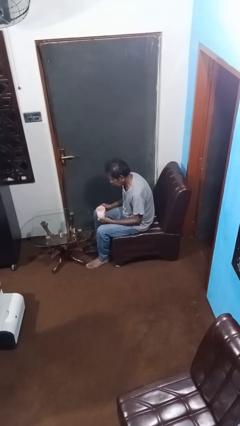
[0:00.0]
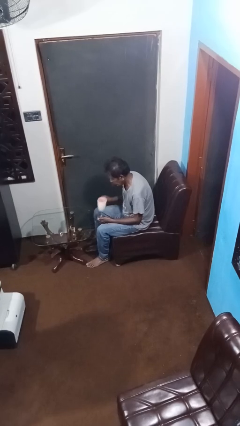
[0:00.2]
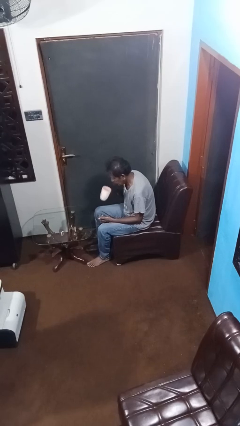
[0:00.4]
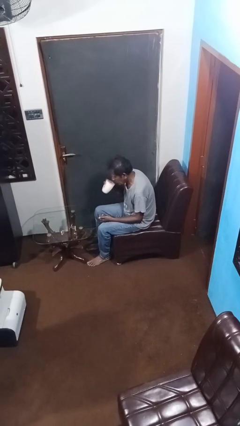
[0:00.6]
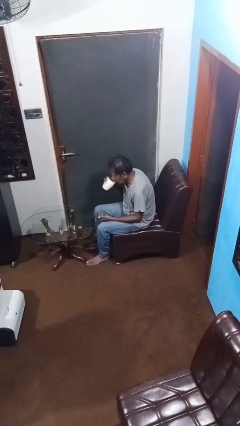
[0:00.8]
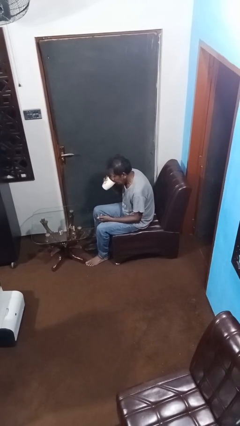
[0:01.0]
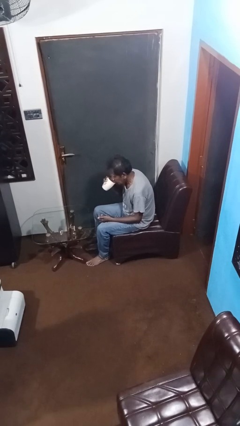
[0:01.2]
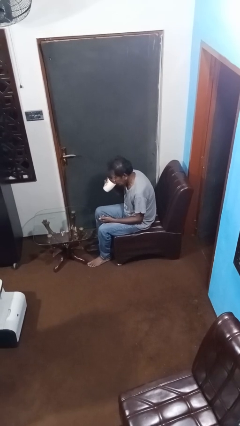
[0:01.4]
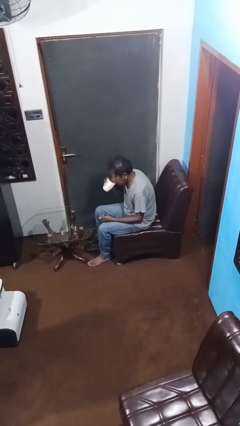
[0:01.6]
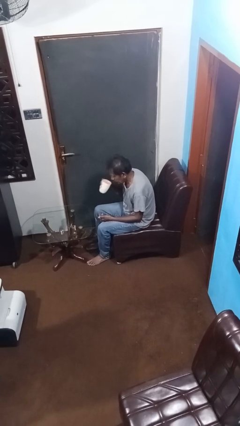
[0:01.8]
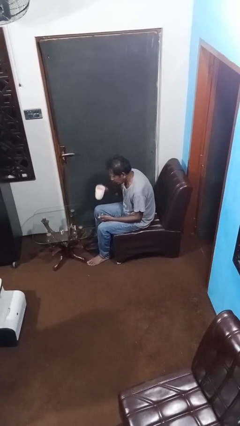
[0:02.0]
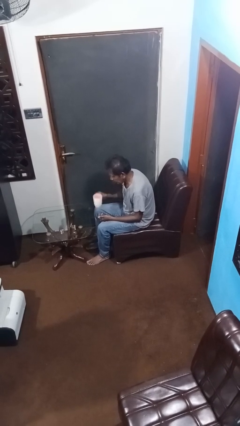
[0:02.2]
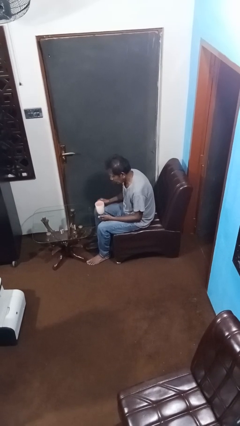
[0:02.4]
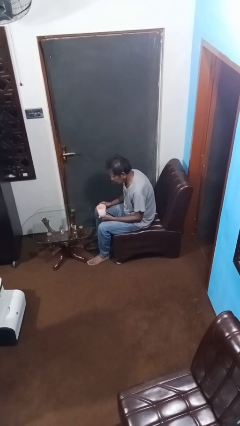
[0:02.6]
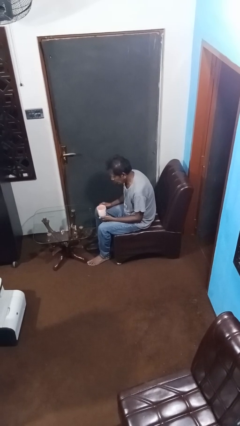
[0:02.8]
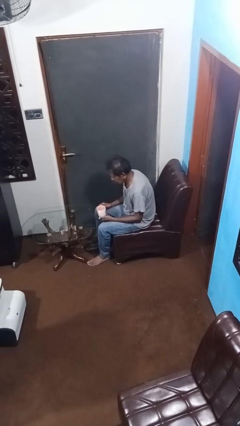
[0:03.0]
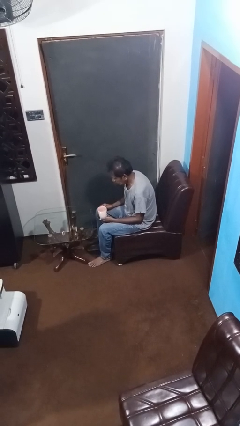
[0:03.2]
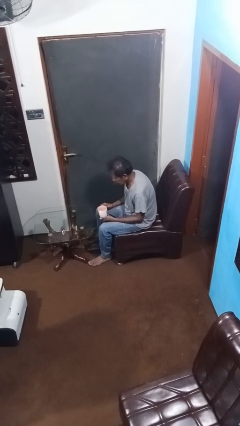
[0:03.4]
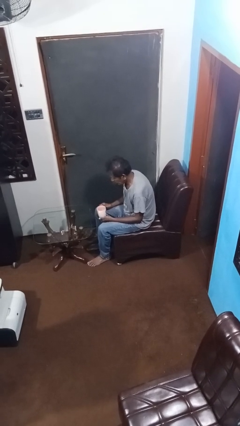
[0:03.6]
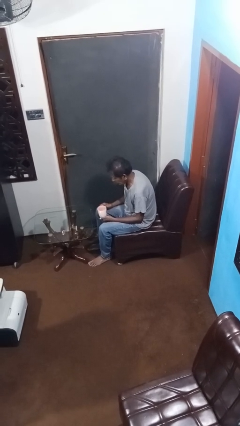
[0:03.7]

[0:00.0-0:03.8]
person drinks from mug

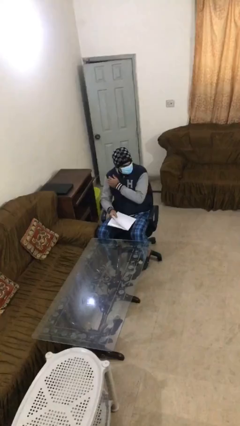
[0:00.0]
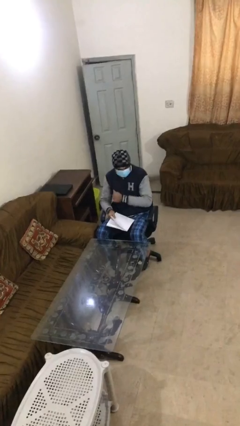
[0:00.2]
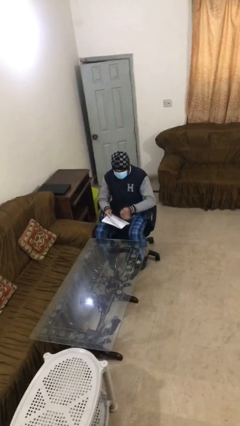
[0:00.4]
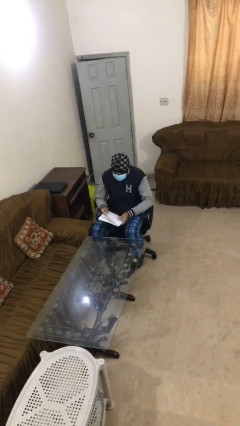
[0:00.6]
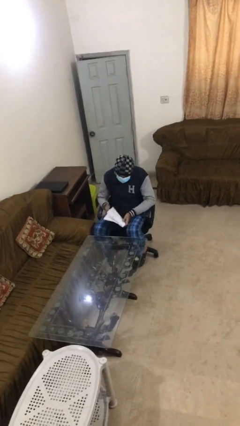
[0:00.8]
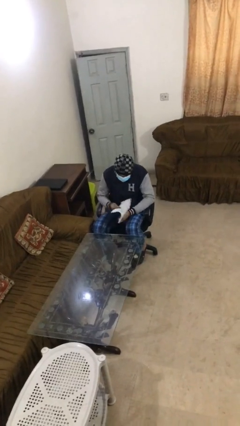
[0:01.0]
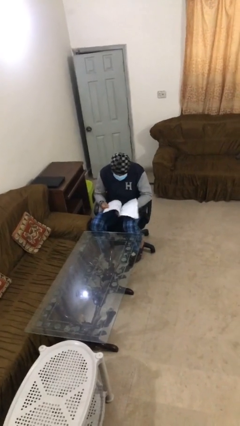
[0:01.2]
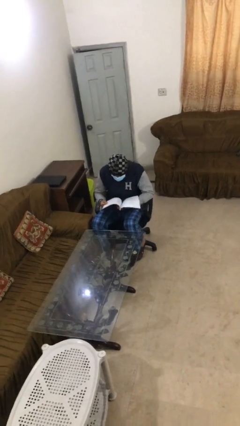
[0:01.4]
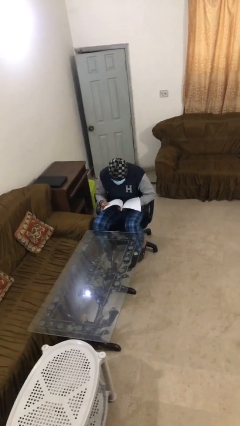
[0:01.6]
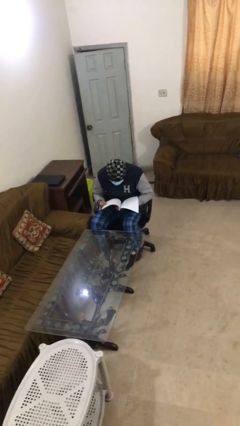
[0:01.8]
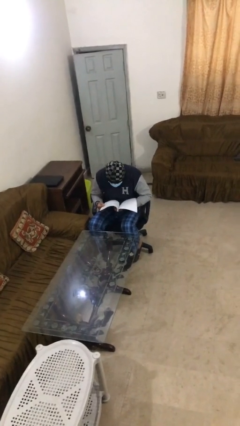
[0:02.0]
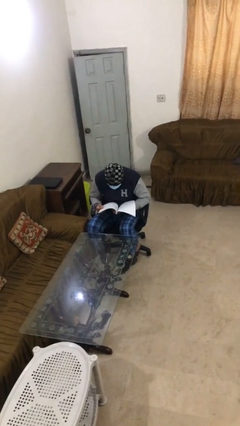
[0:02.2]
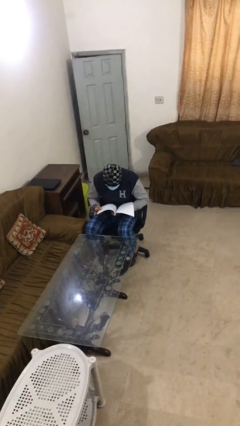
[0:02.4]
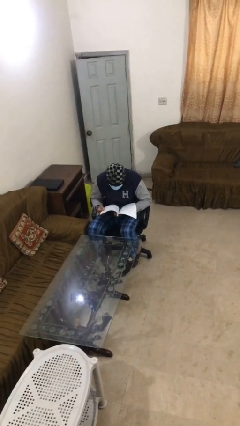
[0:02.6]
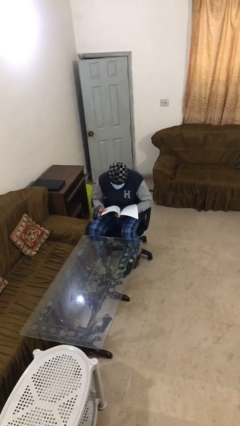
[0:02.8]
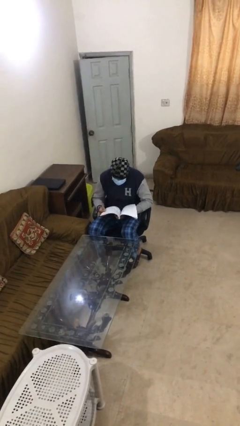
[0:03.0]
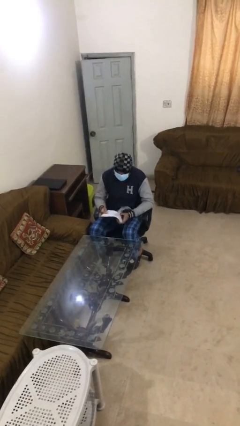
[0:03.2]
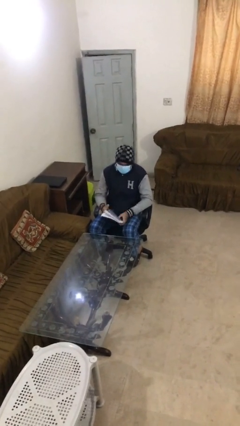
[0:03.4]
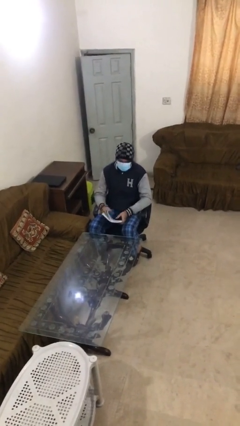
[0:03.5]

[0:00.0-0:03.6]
person reads document

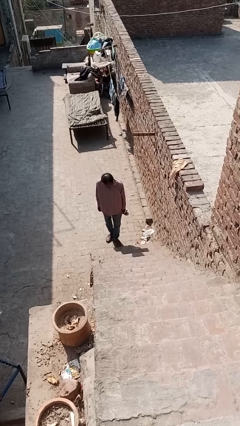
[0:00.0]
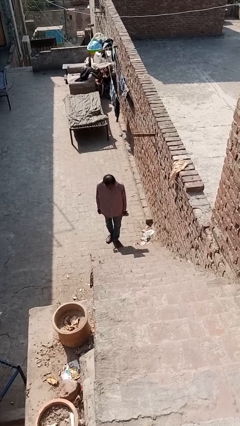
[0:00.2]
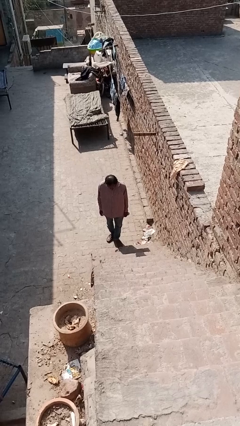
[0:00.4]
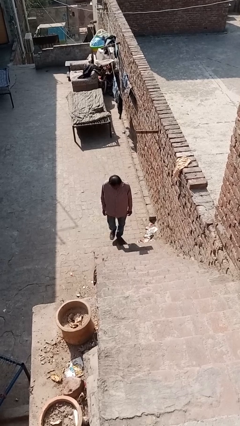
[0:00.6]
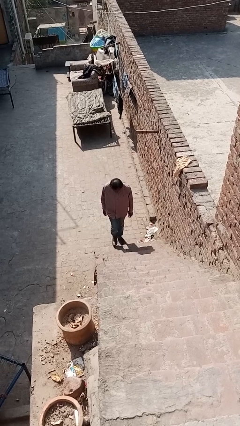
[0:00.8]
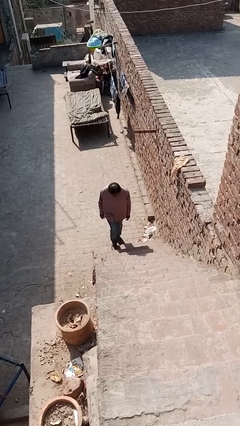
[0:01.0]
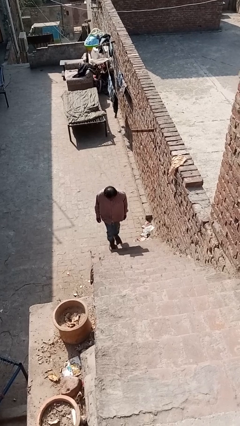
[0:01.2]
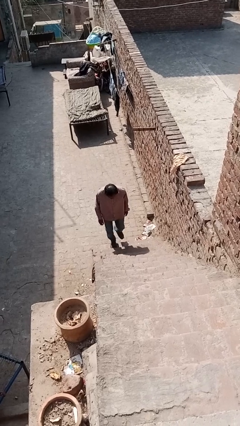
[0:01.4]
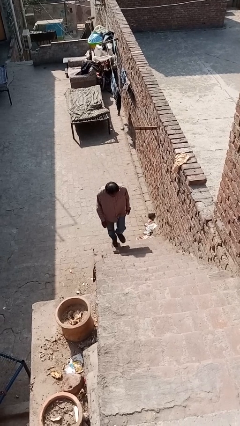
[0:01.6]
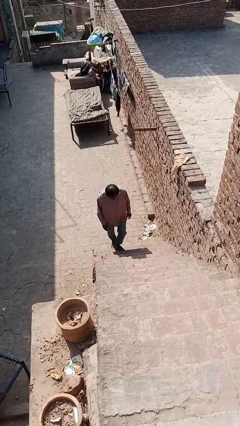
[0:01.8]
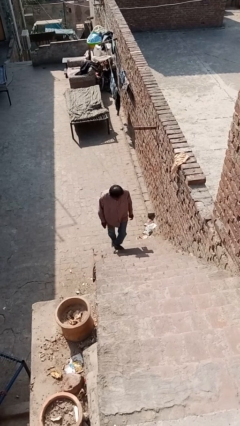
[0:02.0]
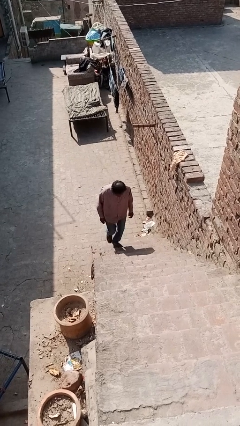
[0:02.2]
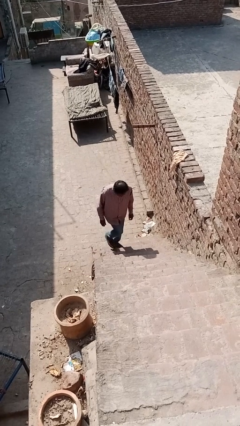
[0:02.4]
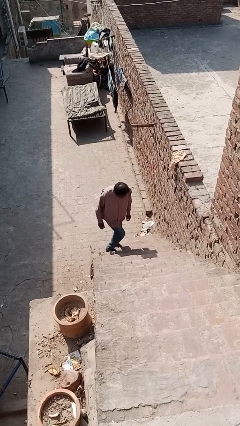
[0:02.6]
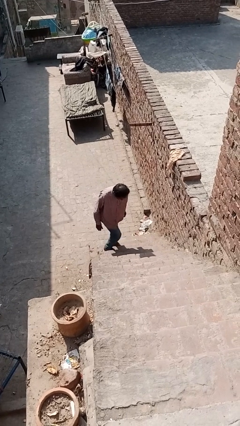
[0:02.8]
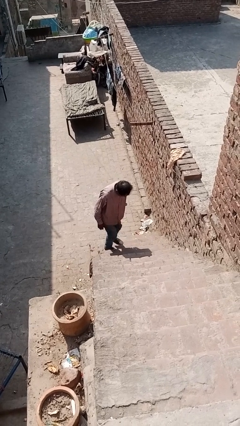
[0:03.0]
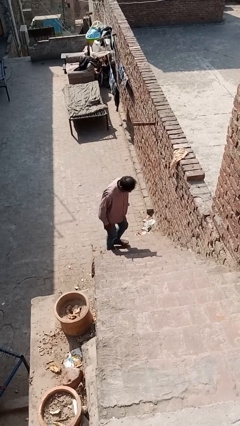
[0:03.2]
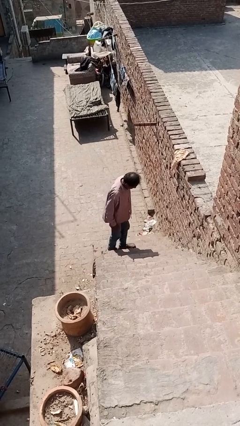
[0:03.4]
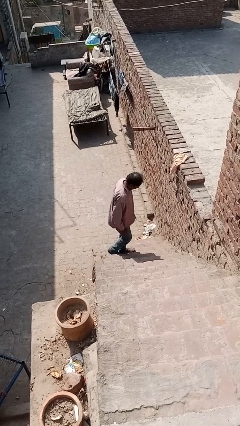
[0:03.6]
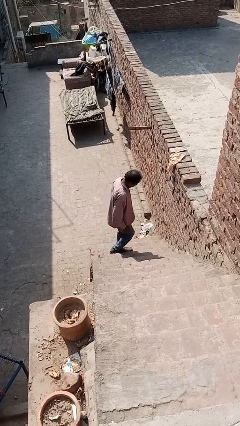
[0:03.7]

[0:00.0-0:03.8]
person climbs up stairs

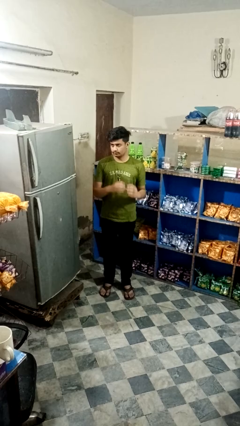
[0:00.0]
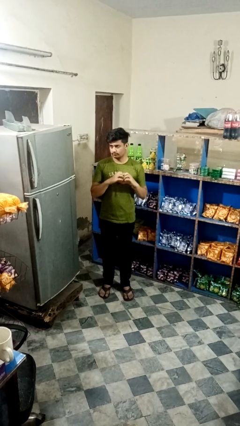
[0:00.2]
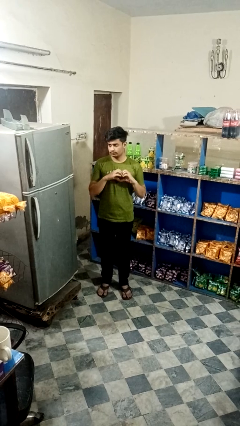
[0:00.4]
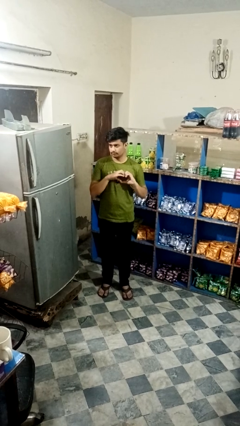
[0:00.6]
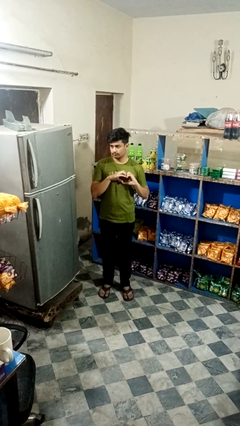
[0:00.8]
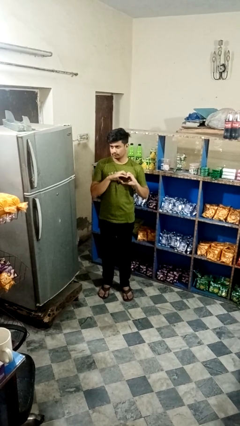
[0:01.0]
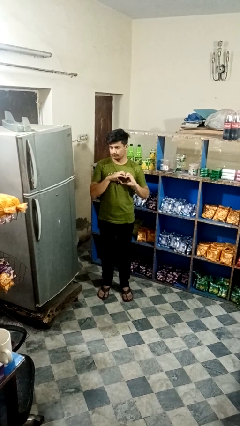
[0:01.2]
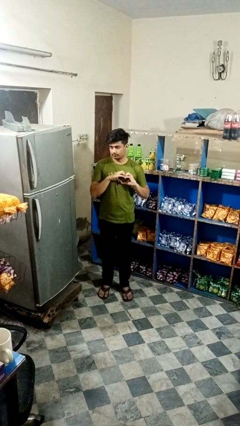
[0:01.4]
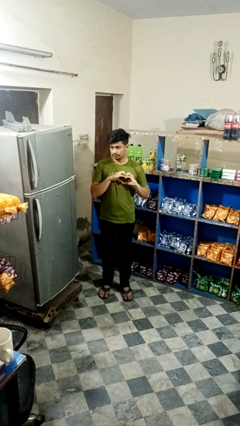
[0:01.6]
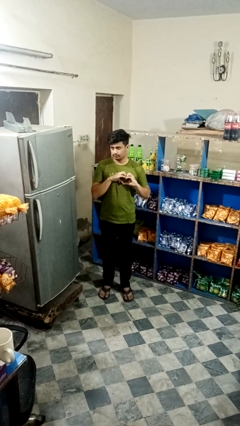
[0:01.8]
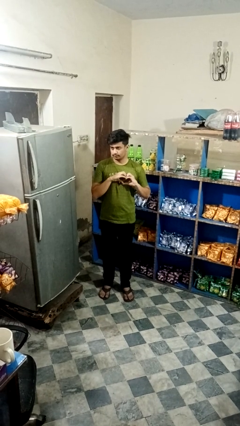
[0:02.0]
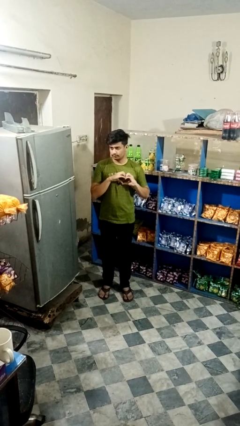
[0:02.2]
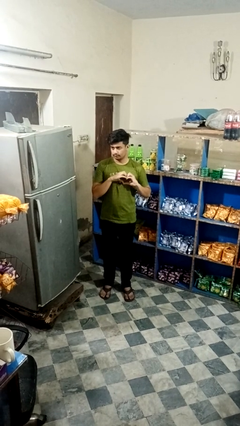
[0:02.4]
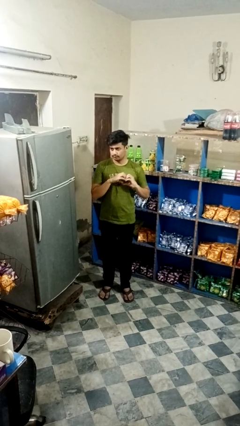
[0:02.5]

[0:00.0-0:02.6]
person gestures heart

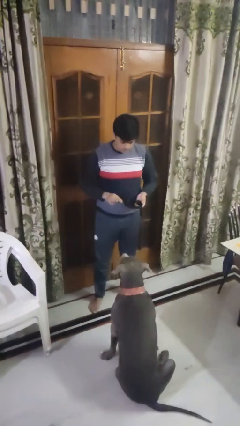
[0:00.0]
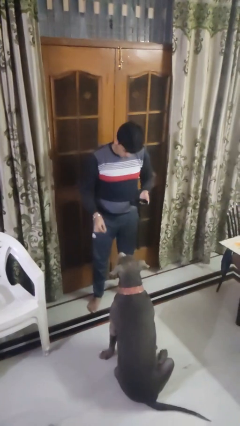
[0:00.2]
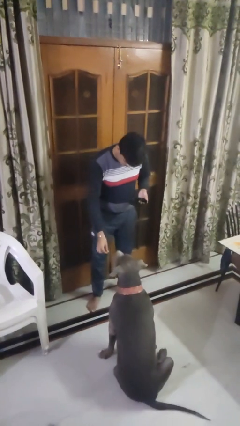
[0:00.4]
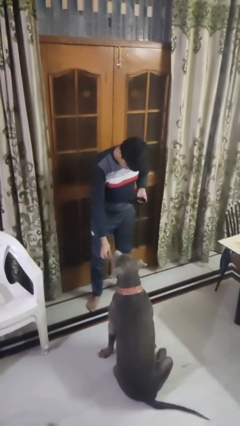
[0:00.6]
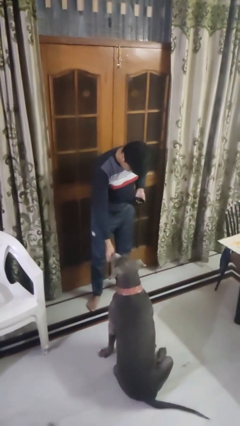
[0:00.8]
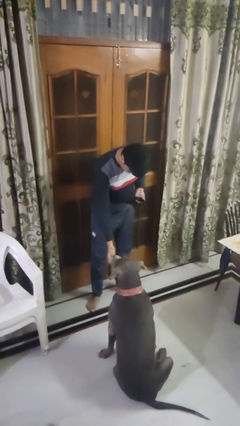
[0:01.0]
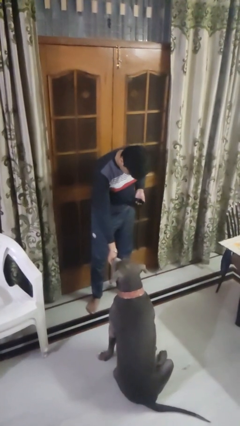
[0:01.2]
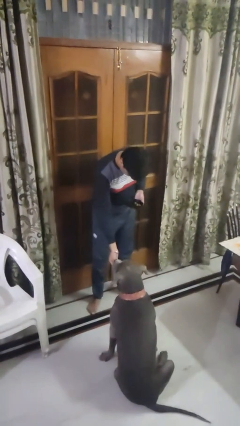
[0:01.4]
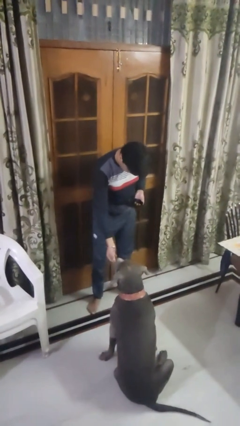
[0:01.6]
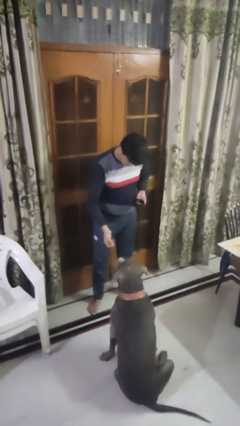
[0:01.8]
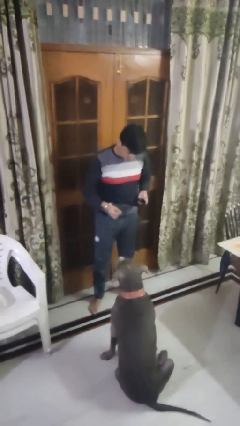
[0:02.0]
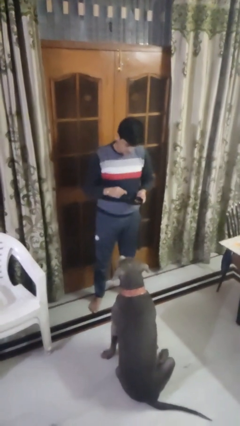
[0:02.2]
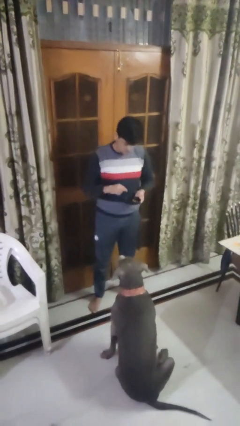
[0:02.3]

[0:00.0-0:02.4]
person feeds dog

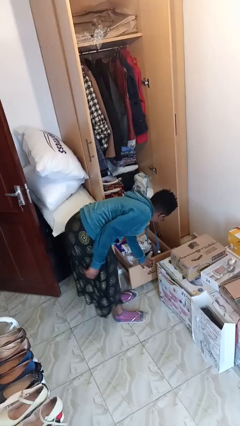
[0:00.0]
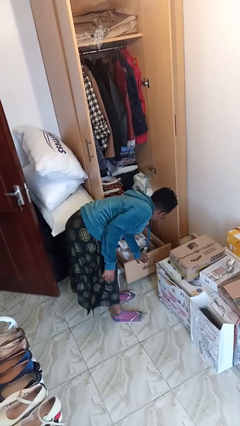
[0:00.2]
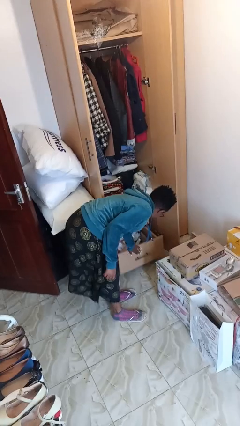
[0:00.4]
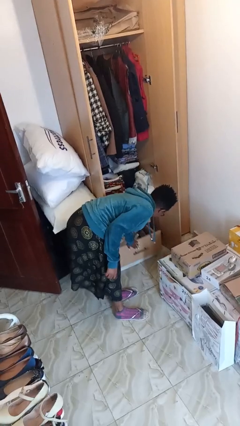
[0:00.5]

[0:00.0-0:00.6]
person closes dresser drawer

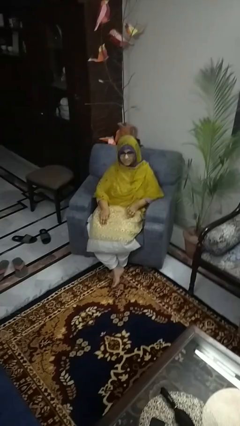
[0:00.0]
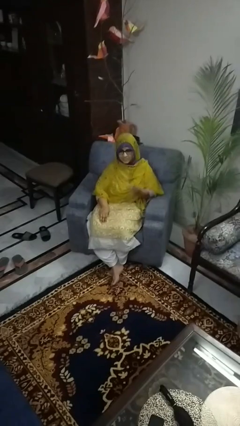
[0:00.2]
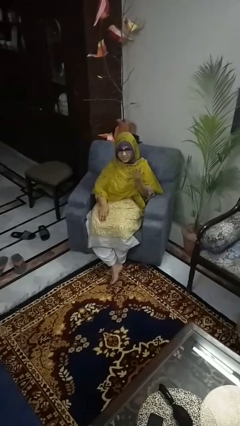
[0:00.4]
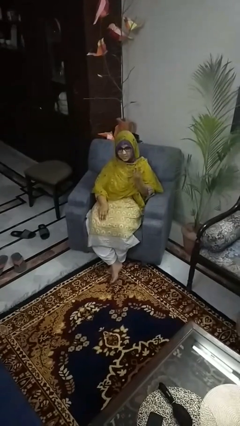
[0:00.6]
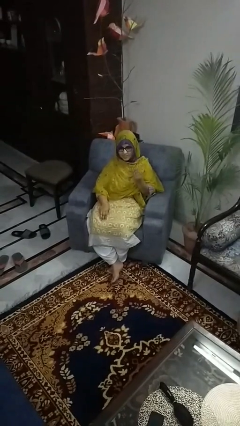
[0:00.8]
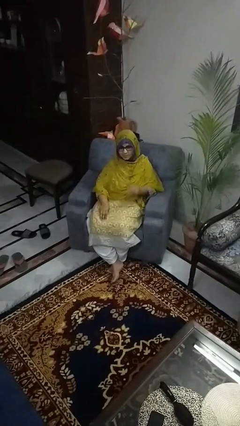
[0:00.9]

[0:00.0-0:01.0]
person gestures number three
